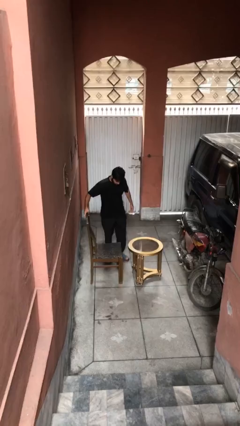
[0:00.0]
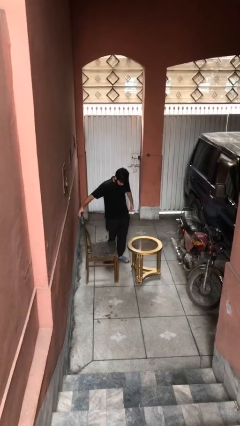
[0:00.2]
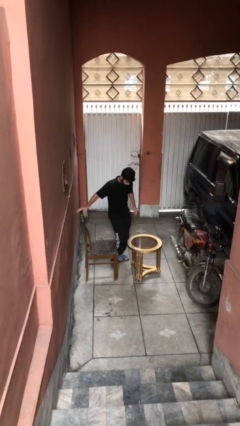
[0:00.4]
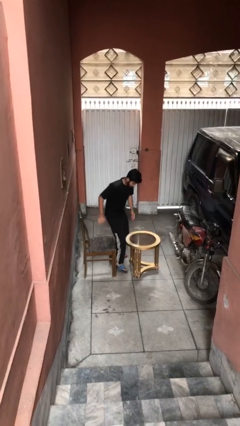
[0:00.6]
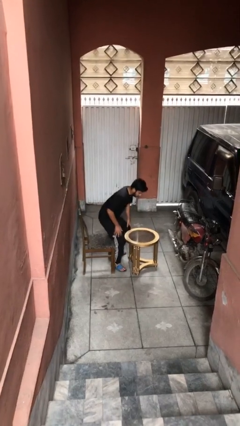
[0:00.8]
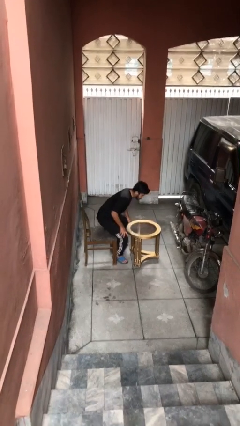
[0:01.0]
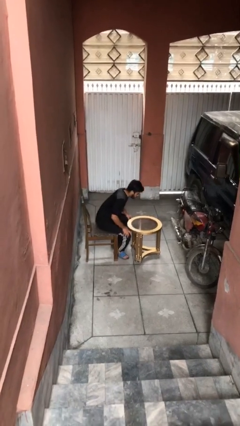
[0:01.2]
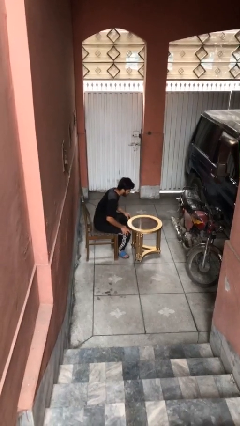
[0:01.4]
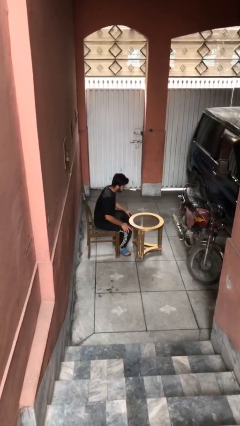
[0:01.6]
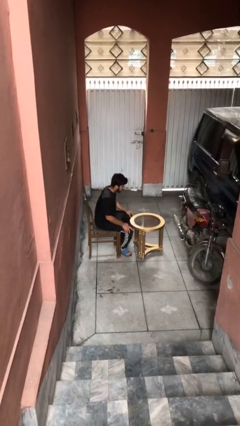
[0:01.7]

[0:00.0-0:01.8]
person sits down

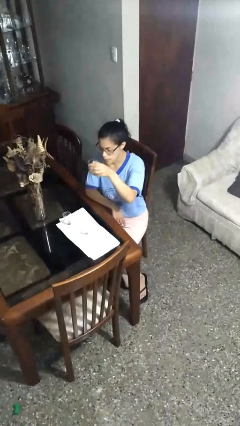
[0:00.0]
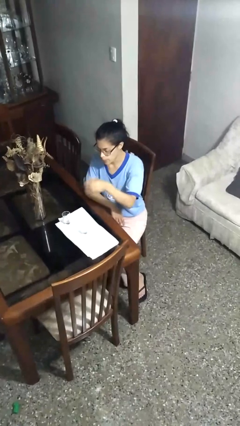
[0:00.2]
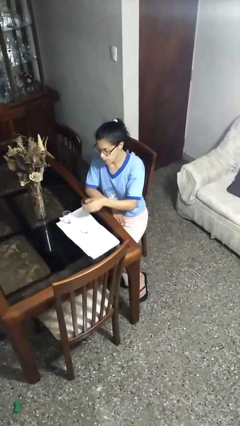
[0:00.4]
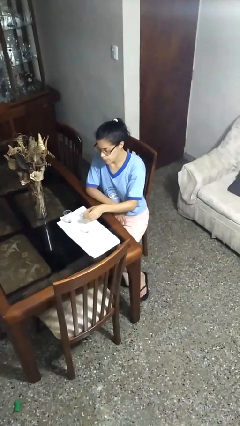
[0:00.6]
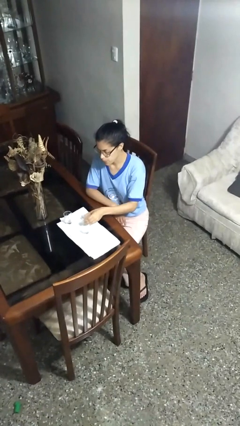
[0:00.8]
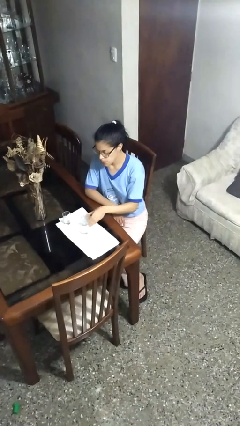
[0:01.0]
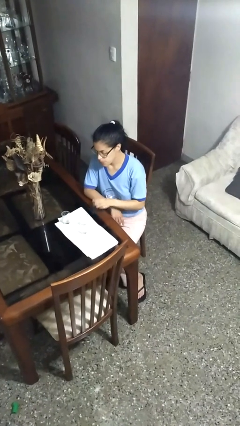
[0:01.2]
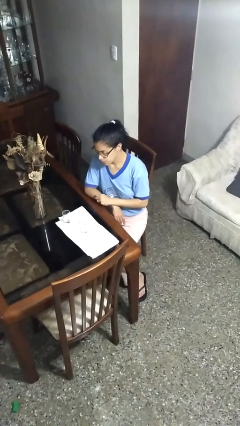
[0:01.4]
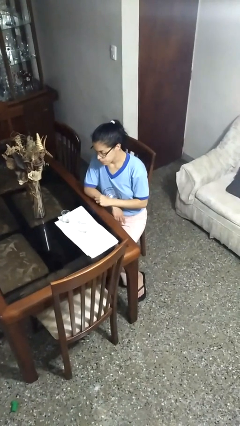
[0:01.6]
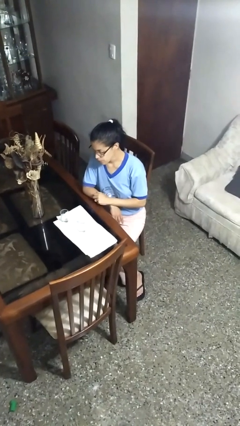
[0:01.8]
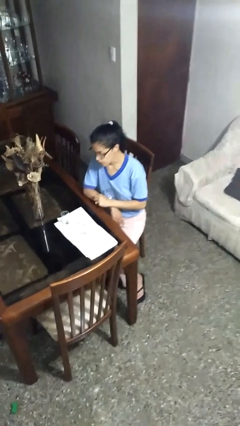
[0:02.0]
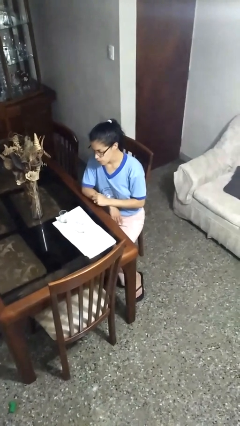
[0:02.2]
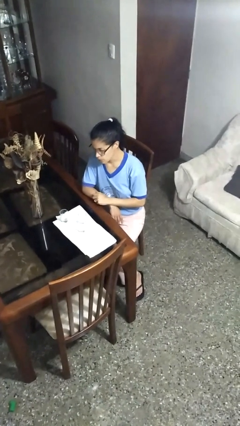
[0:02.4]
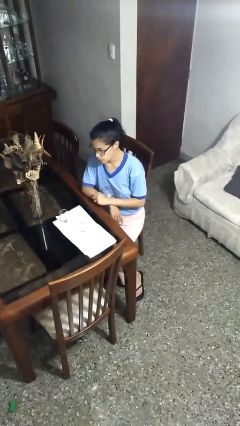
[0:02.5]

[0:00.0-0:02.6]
person puts down object on table

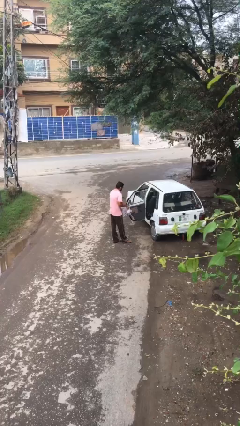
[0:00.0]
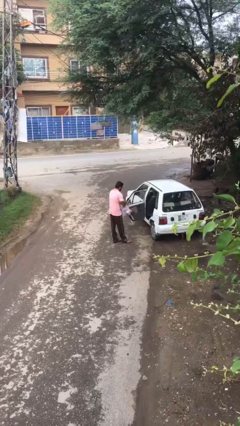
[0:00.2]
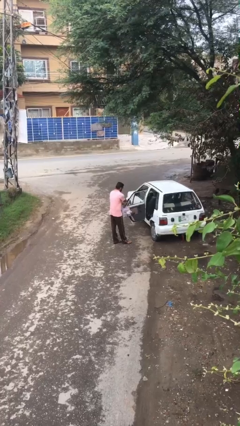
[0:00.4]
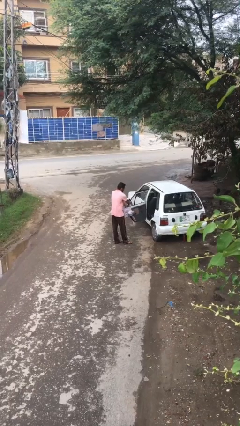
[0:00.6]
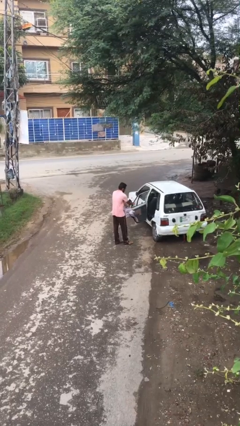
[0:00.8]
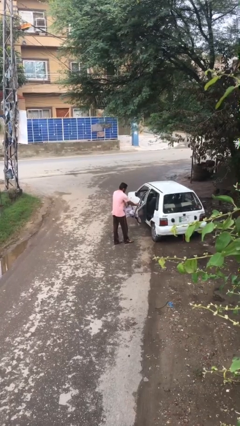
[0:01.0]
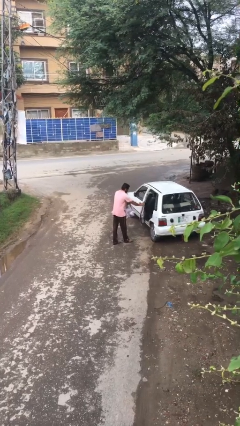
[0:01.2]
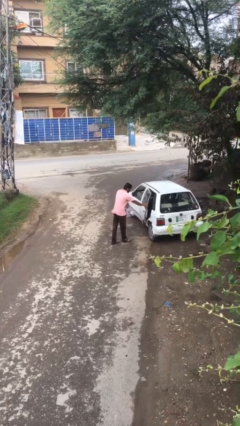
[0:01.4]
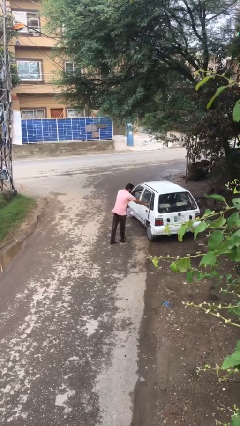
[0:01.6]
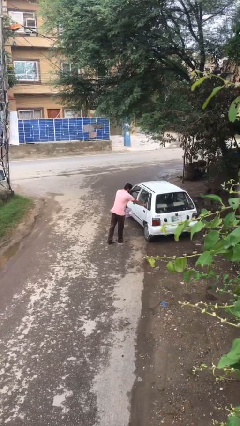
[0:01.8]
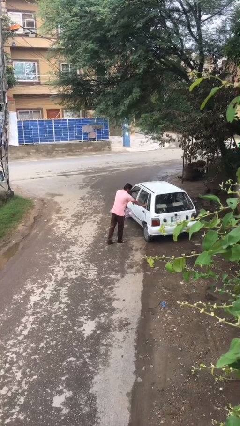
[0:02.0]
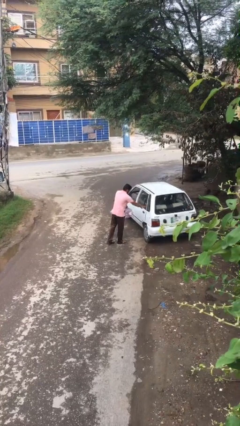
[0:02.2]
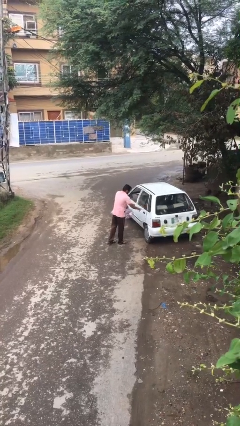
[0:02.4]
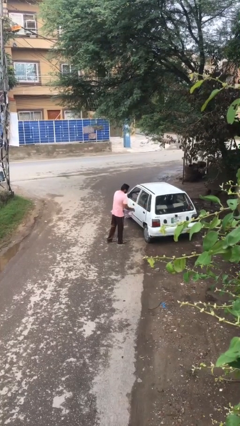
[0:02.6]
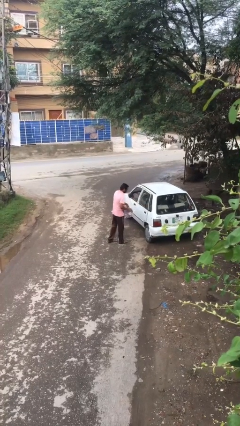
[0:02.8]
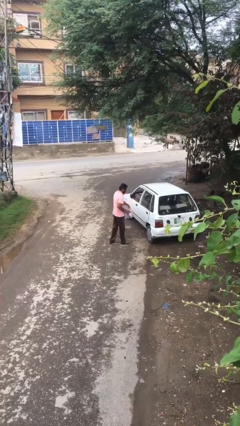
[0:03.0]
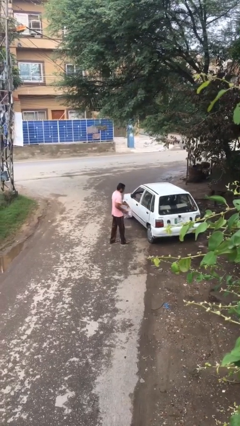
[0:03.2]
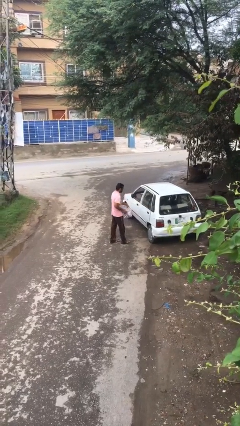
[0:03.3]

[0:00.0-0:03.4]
person closes car door

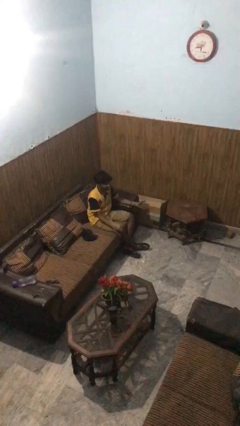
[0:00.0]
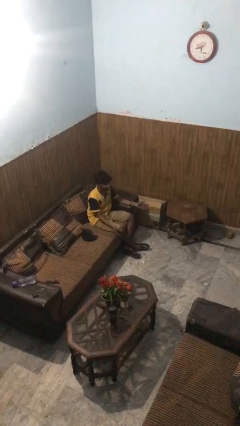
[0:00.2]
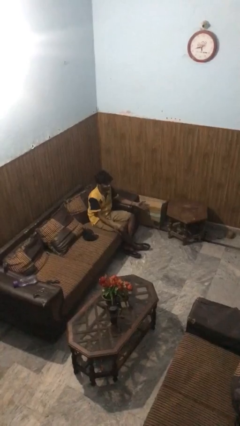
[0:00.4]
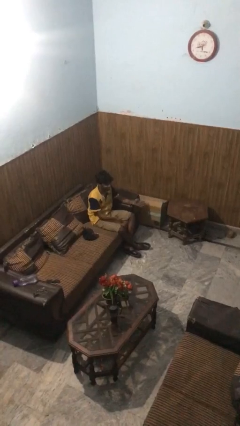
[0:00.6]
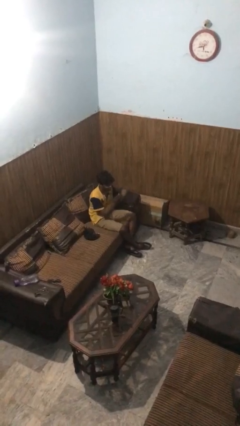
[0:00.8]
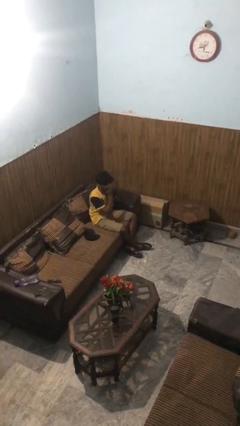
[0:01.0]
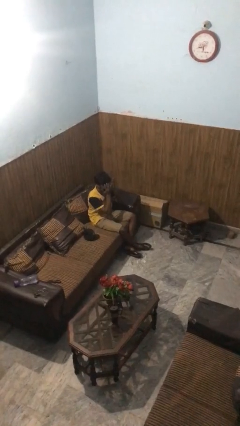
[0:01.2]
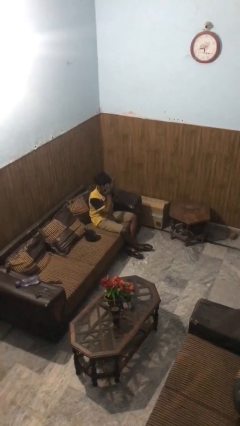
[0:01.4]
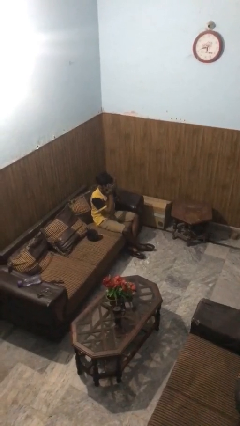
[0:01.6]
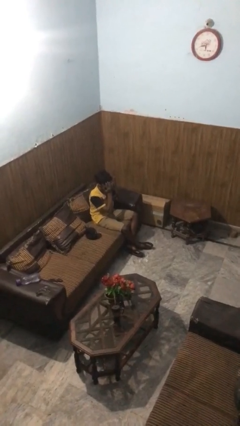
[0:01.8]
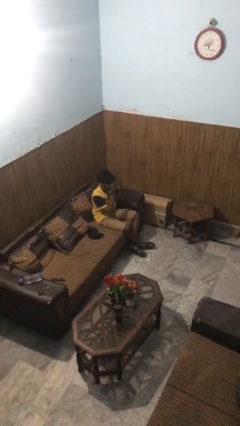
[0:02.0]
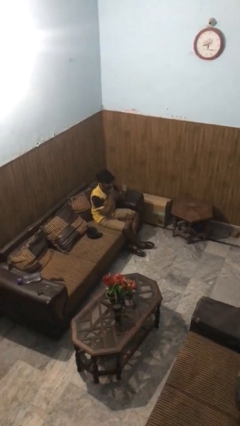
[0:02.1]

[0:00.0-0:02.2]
person covers face with hands

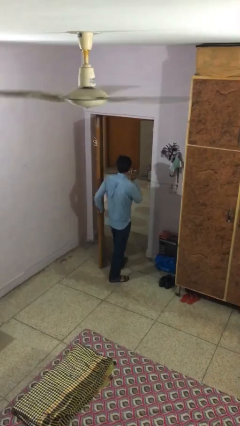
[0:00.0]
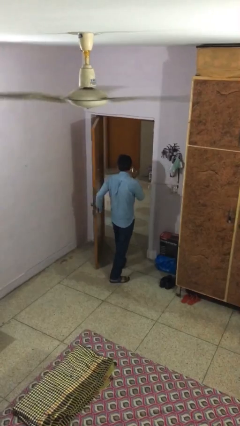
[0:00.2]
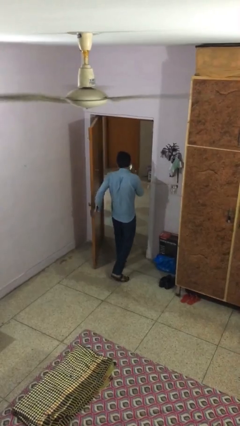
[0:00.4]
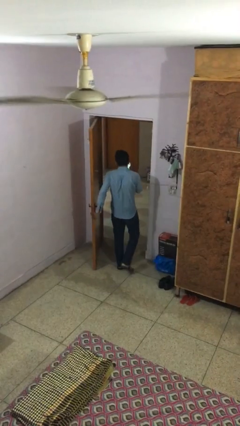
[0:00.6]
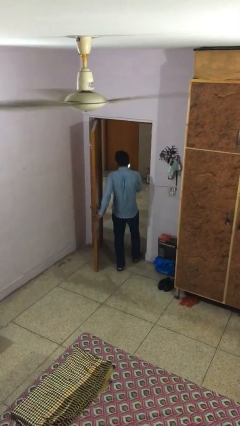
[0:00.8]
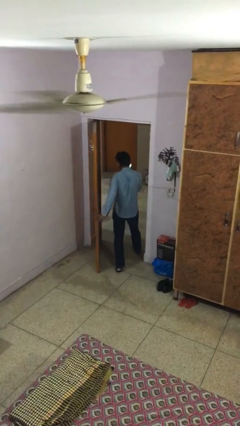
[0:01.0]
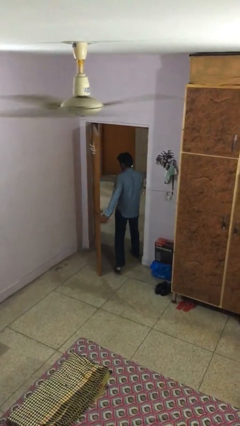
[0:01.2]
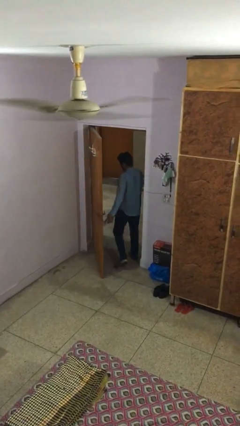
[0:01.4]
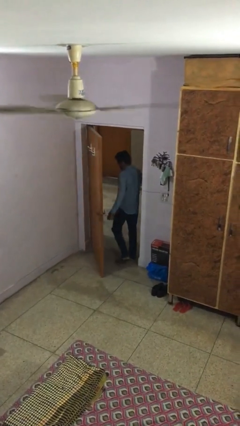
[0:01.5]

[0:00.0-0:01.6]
person exits scene through structure

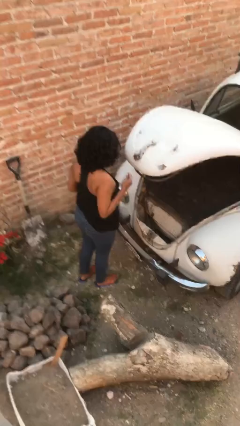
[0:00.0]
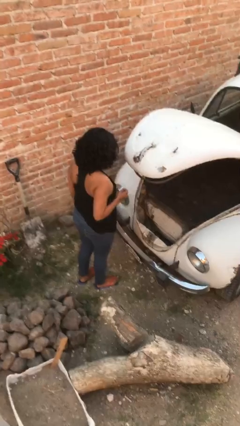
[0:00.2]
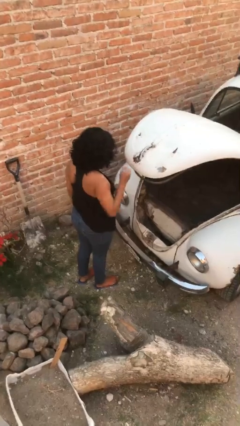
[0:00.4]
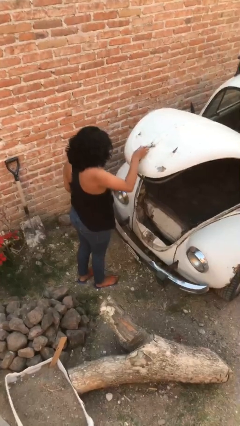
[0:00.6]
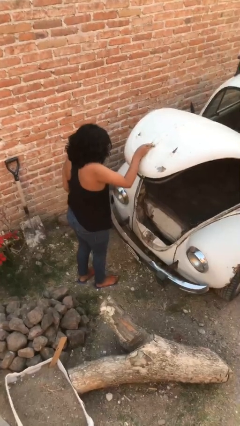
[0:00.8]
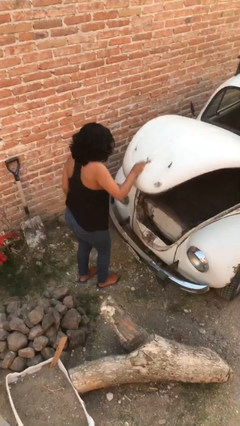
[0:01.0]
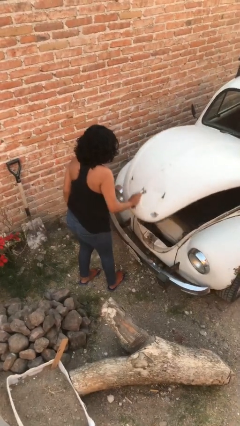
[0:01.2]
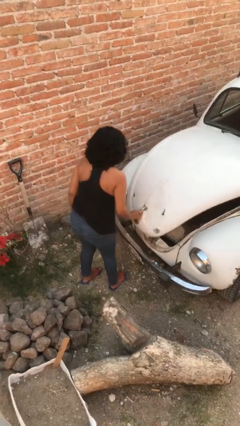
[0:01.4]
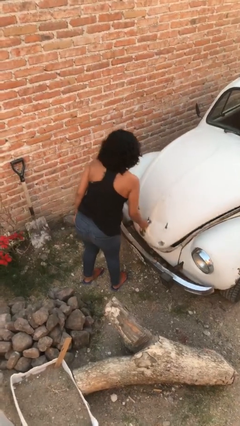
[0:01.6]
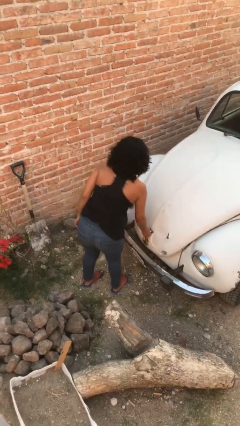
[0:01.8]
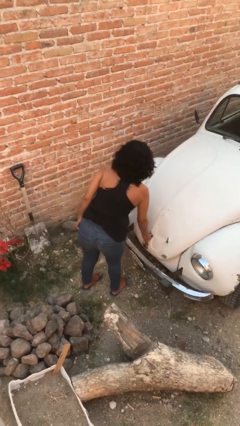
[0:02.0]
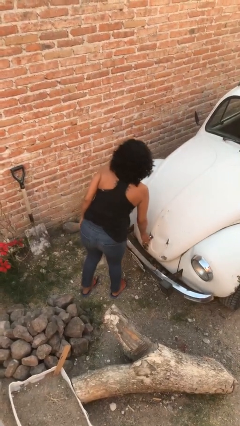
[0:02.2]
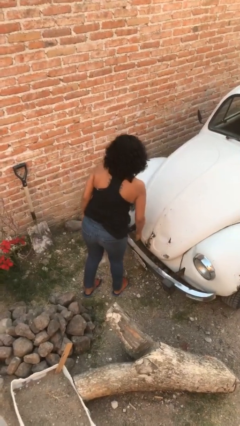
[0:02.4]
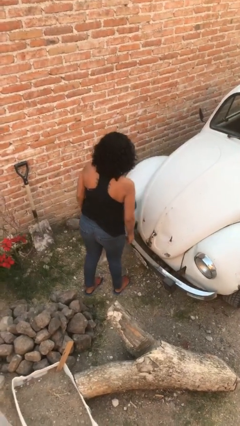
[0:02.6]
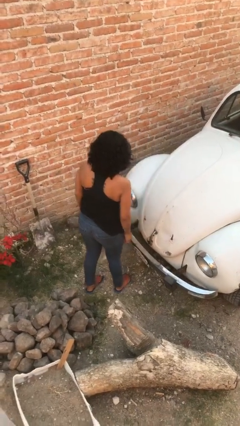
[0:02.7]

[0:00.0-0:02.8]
person closes car trunk

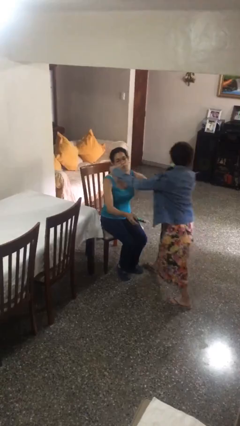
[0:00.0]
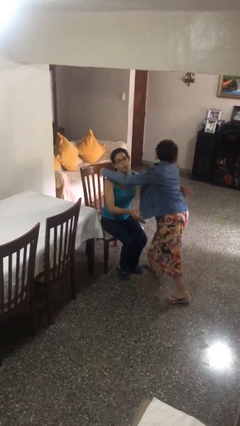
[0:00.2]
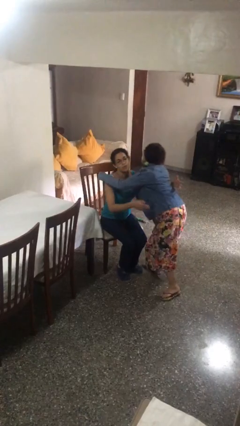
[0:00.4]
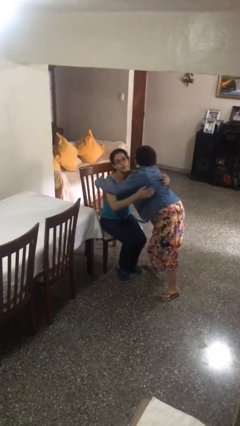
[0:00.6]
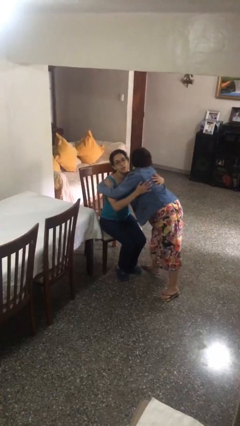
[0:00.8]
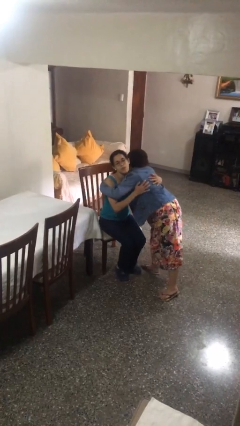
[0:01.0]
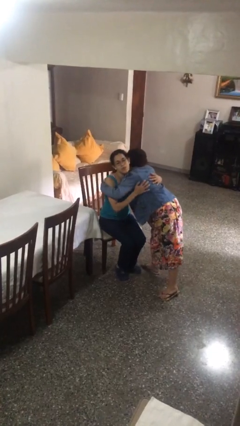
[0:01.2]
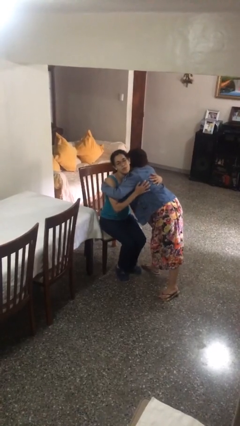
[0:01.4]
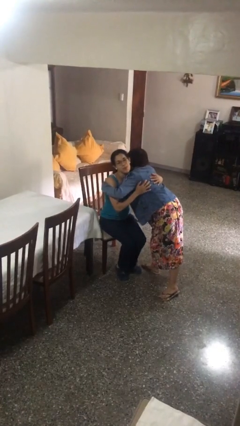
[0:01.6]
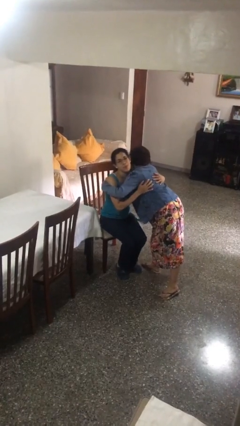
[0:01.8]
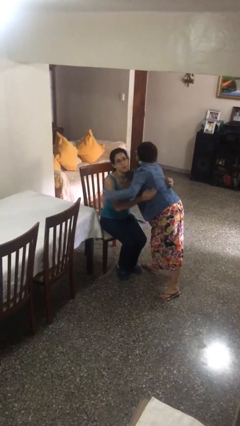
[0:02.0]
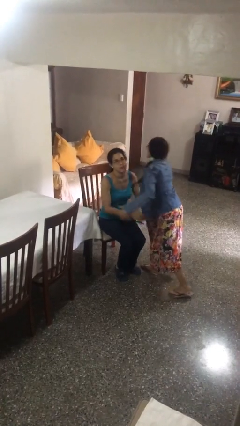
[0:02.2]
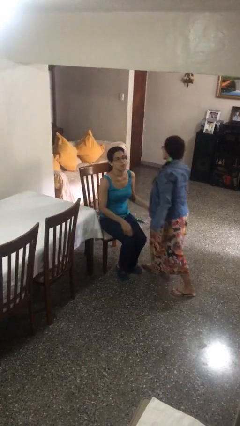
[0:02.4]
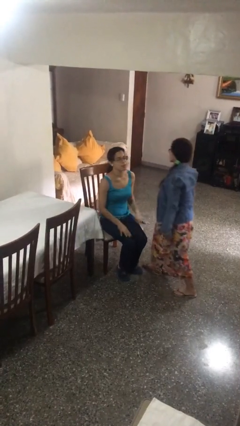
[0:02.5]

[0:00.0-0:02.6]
person embraces person

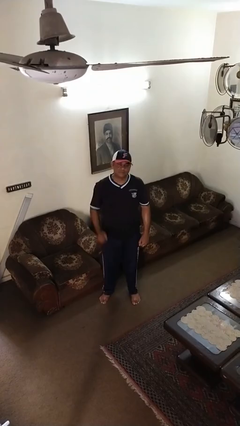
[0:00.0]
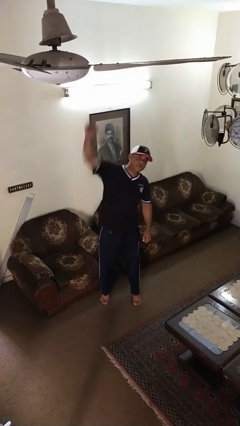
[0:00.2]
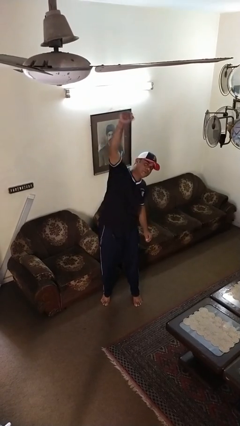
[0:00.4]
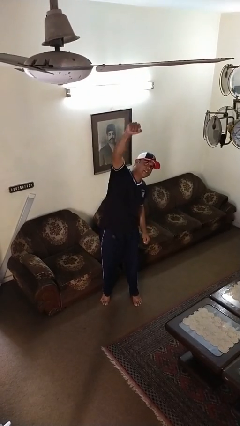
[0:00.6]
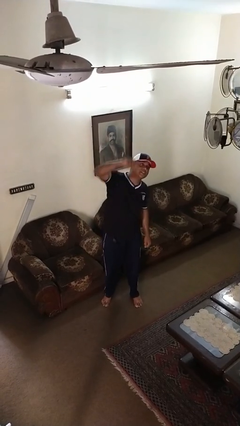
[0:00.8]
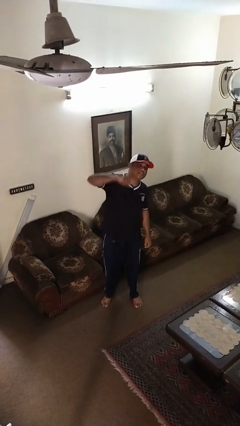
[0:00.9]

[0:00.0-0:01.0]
person punches
